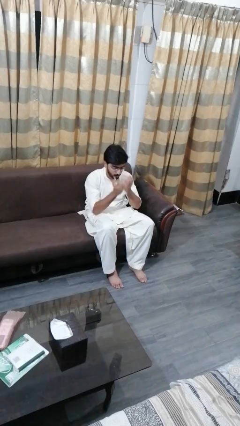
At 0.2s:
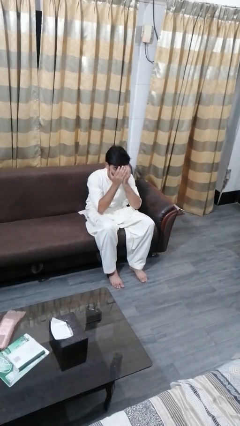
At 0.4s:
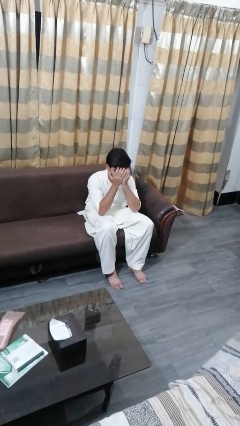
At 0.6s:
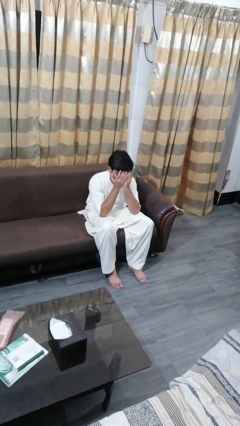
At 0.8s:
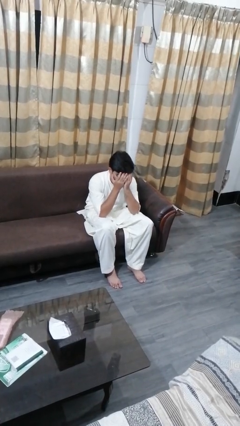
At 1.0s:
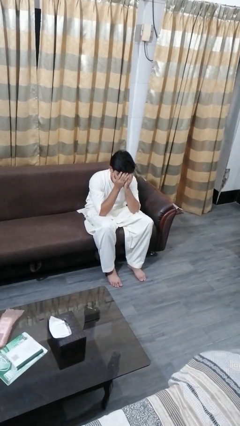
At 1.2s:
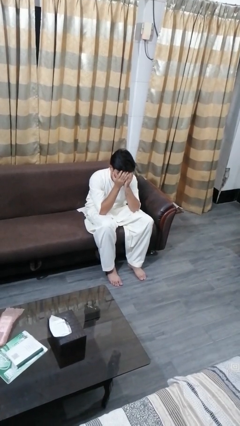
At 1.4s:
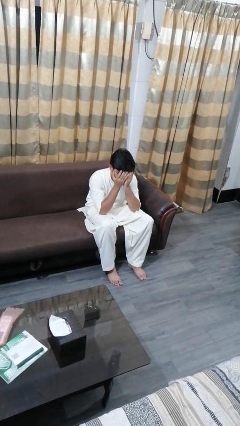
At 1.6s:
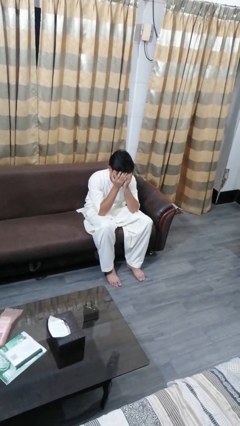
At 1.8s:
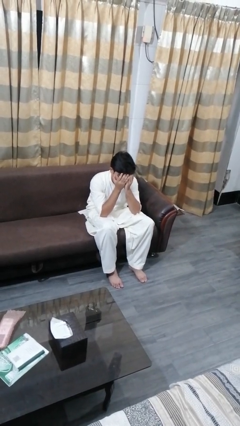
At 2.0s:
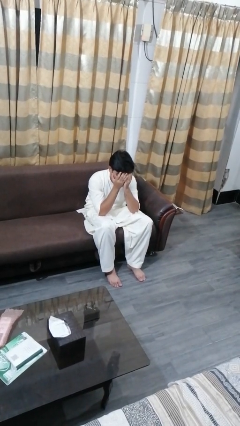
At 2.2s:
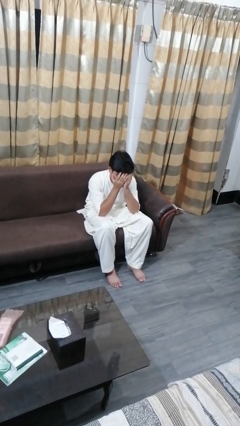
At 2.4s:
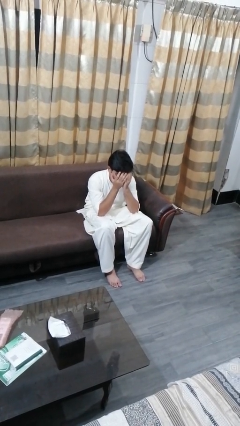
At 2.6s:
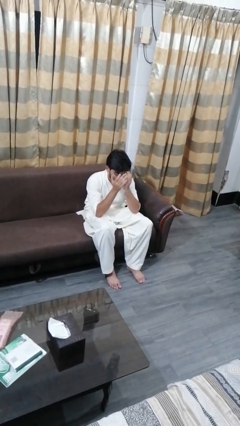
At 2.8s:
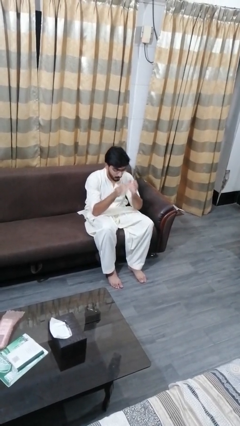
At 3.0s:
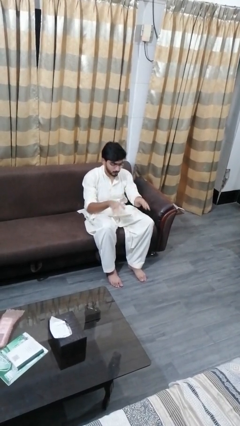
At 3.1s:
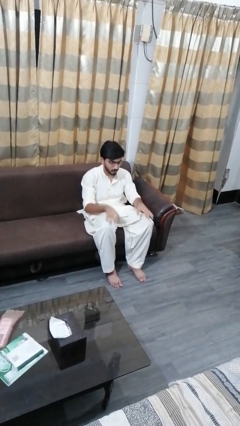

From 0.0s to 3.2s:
person covers face with hands

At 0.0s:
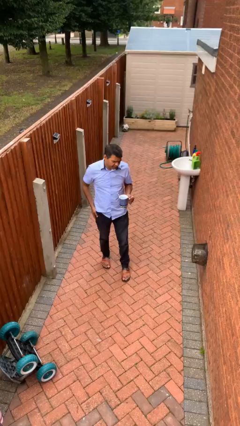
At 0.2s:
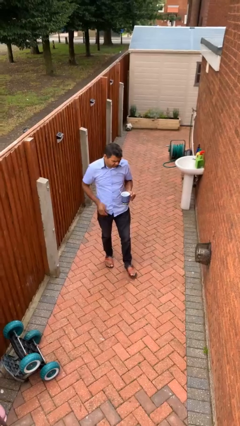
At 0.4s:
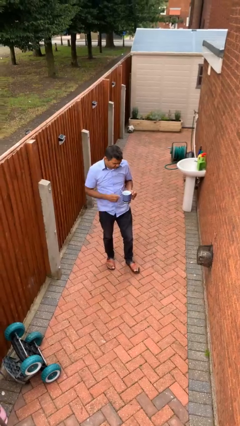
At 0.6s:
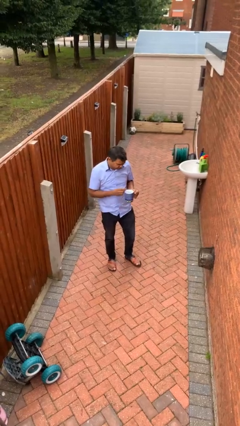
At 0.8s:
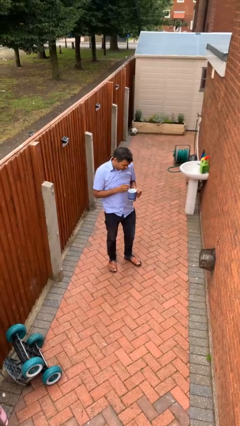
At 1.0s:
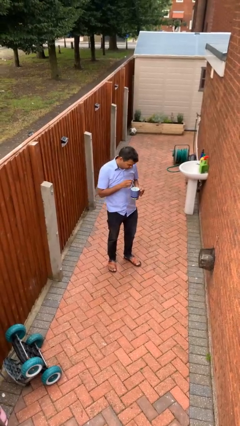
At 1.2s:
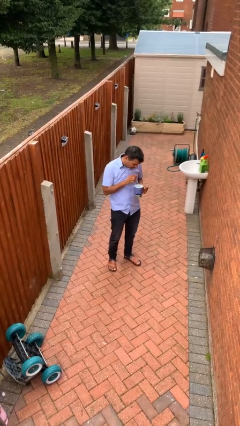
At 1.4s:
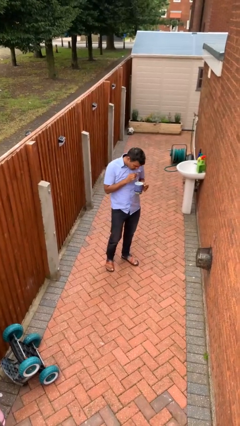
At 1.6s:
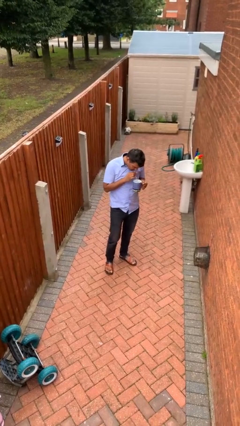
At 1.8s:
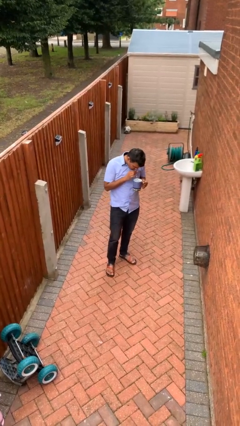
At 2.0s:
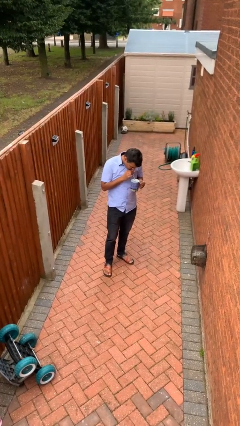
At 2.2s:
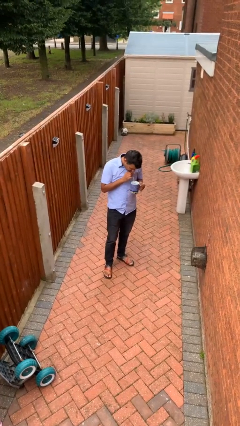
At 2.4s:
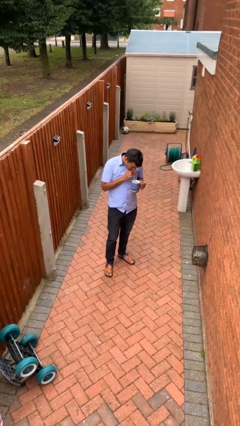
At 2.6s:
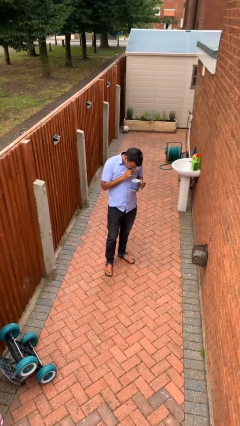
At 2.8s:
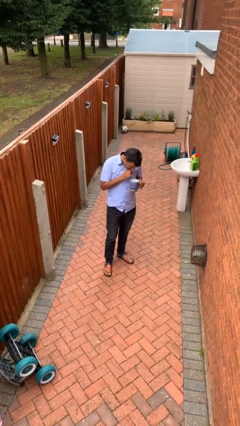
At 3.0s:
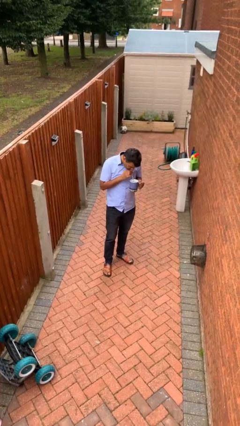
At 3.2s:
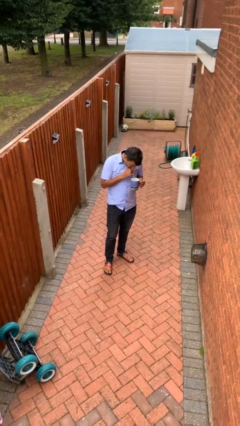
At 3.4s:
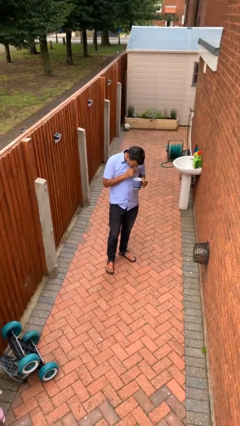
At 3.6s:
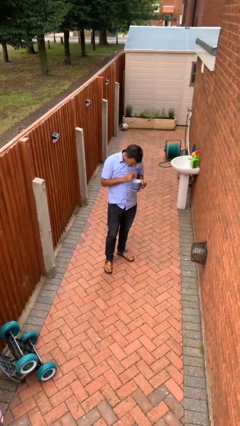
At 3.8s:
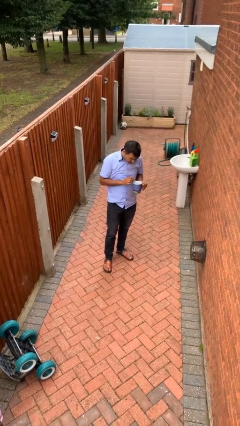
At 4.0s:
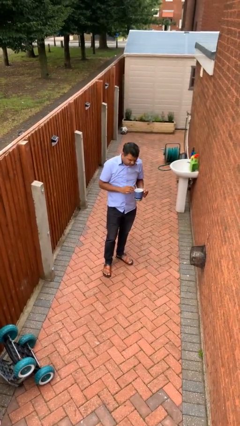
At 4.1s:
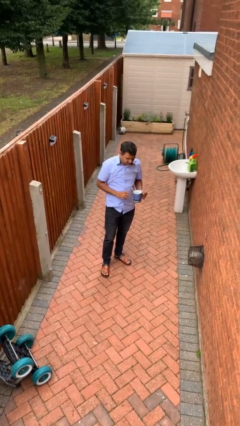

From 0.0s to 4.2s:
person drinks from straw

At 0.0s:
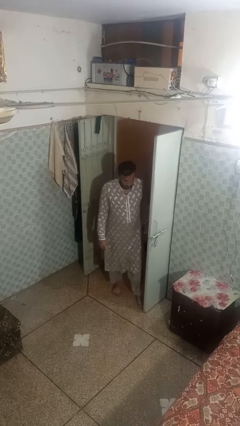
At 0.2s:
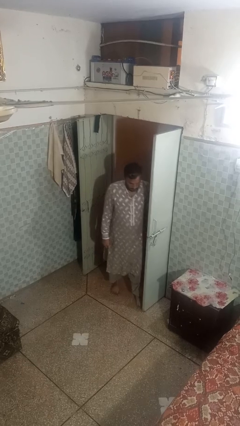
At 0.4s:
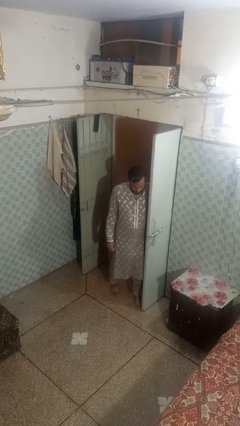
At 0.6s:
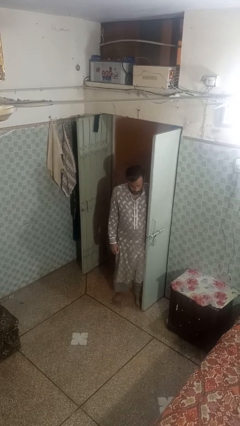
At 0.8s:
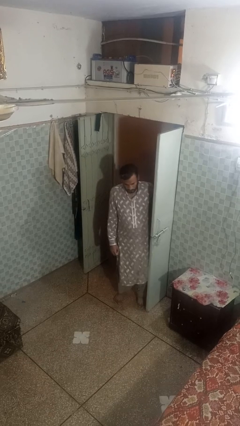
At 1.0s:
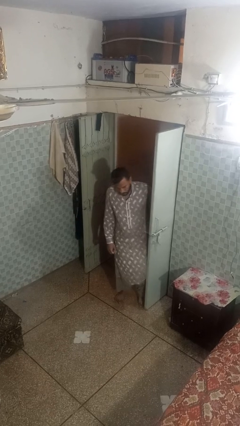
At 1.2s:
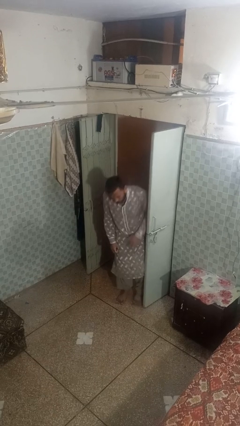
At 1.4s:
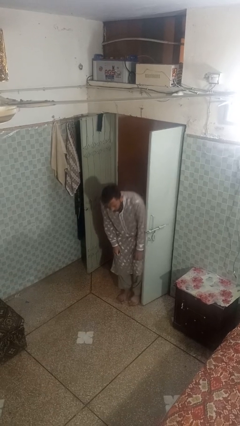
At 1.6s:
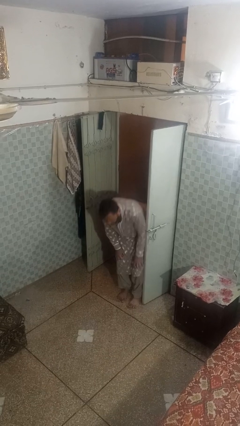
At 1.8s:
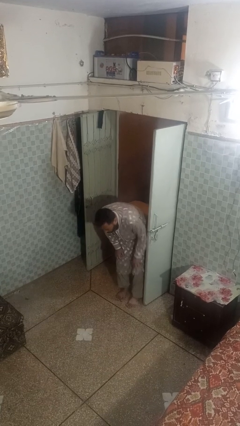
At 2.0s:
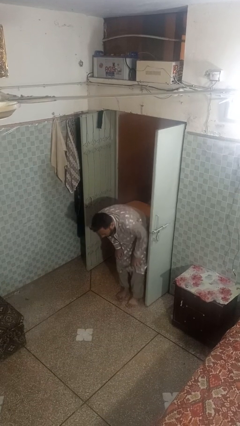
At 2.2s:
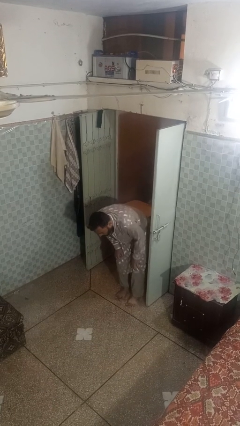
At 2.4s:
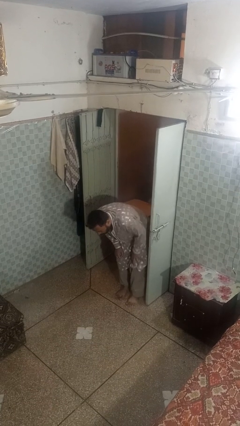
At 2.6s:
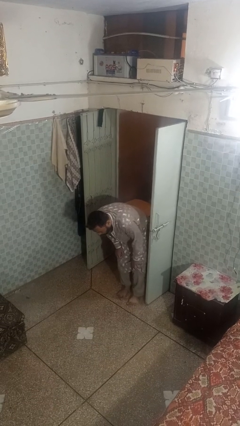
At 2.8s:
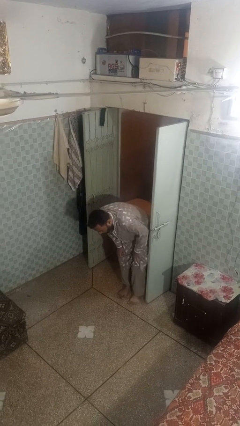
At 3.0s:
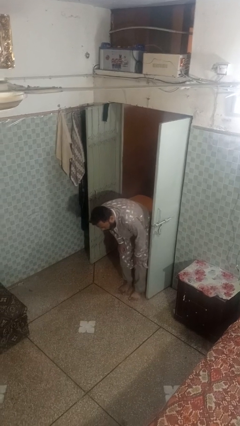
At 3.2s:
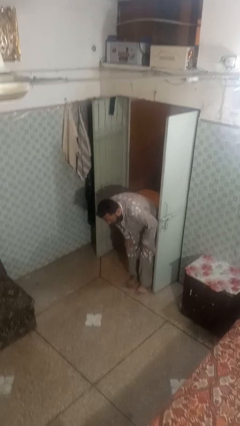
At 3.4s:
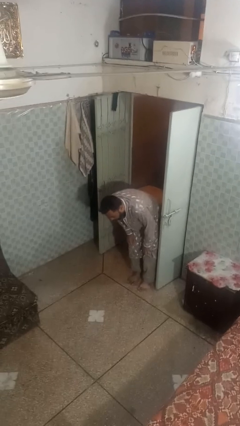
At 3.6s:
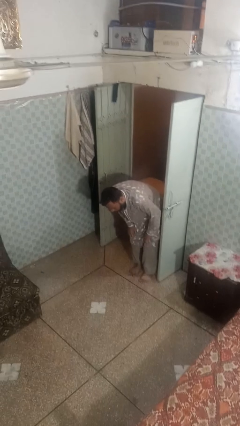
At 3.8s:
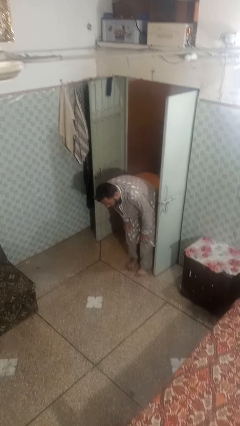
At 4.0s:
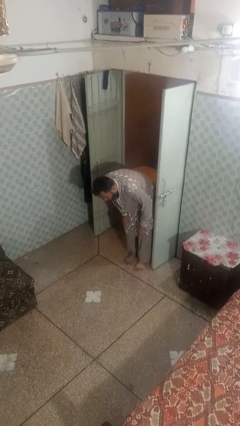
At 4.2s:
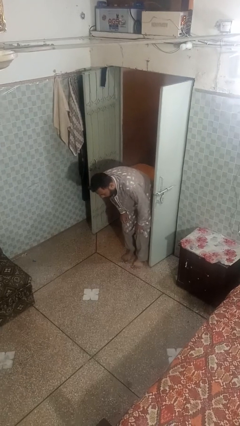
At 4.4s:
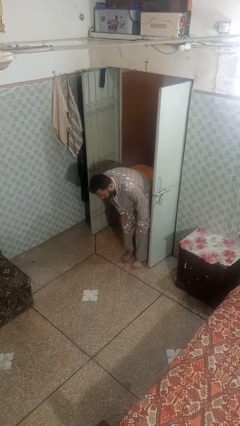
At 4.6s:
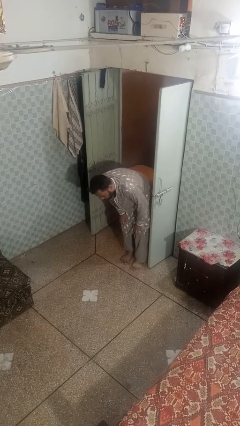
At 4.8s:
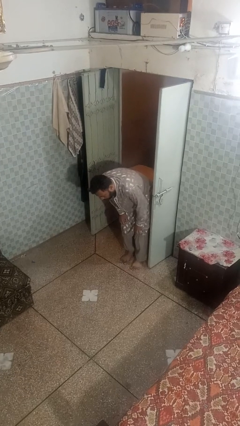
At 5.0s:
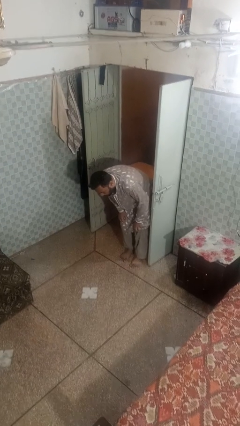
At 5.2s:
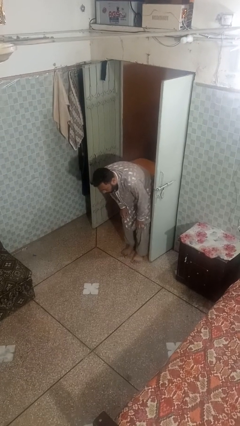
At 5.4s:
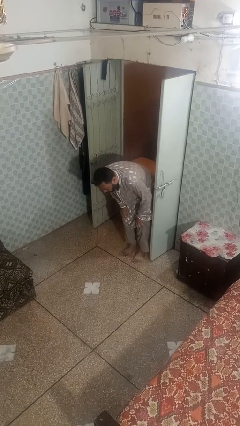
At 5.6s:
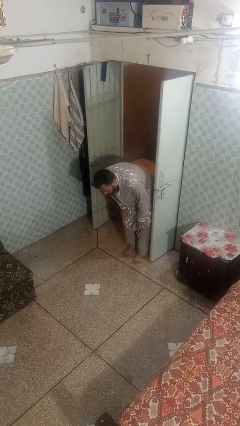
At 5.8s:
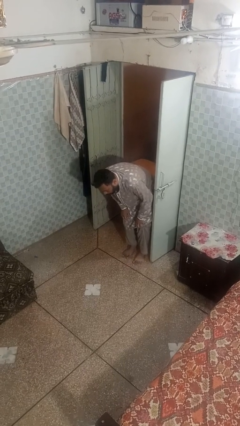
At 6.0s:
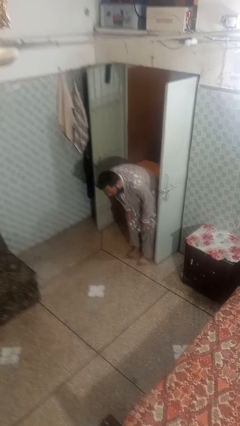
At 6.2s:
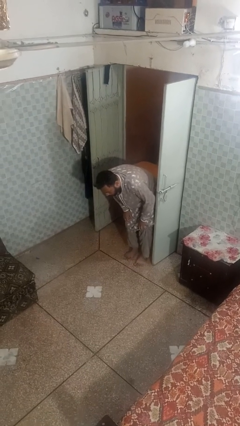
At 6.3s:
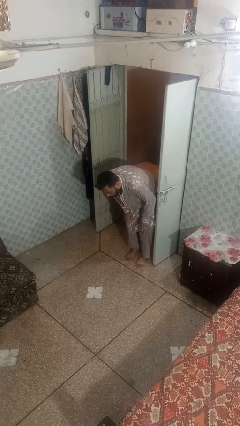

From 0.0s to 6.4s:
person trips on object on floor

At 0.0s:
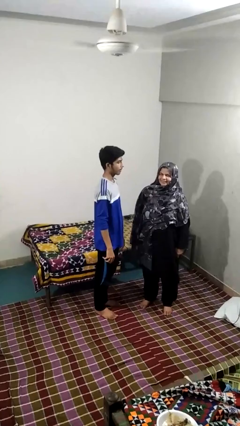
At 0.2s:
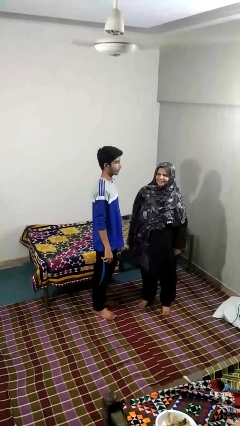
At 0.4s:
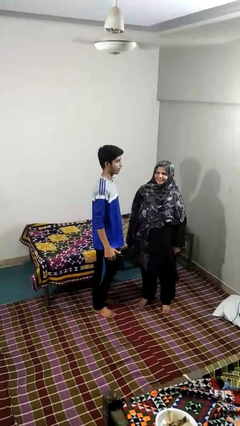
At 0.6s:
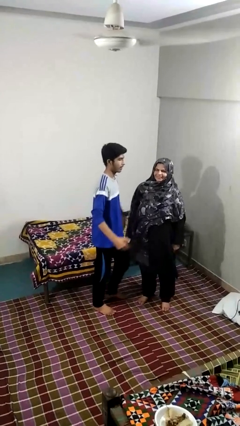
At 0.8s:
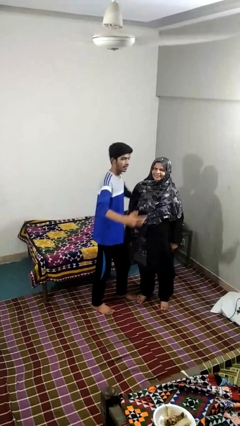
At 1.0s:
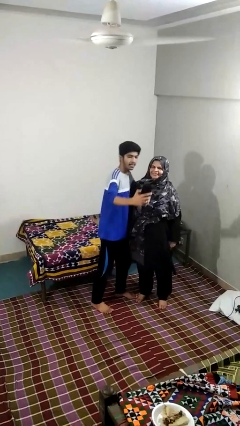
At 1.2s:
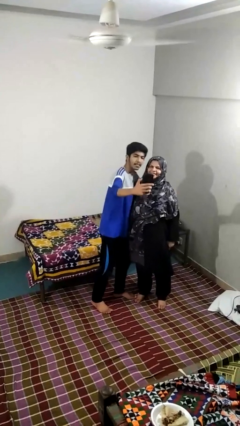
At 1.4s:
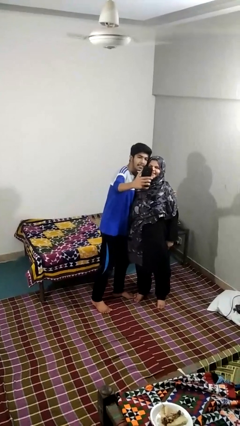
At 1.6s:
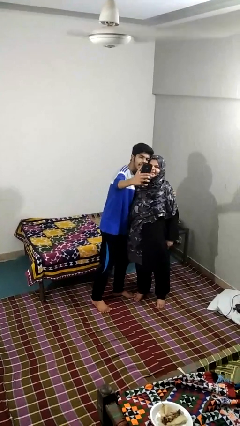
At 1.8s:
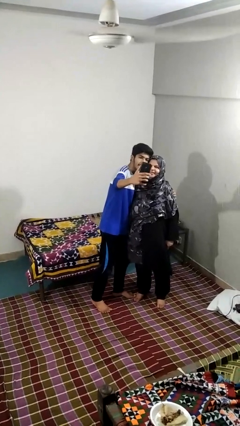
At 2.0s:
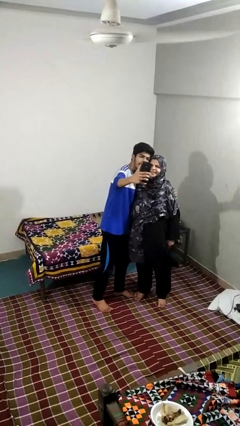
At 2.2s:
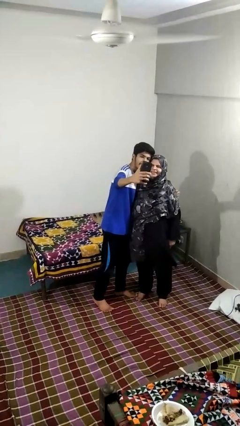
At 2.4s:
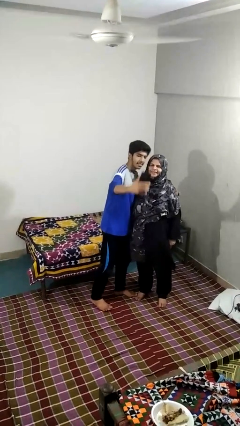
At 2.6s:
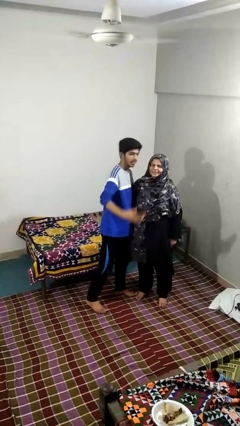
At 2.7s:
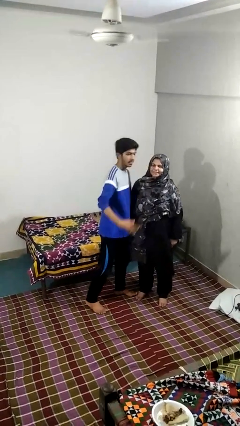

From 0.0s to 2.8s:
person takes selfie with person

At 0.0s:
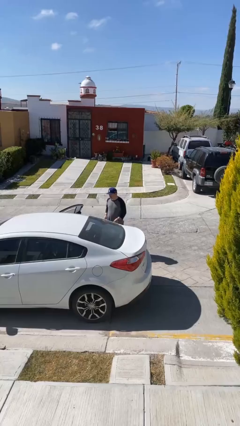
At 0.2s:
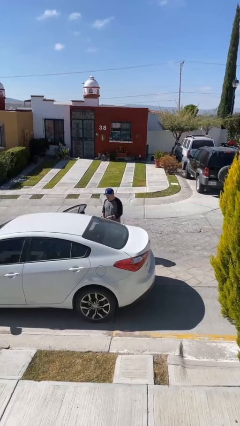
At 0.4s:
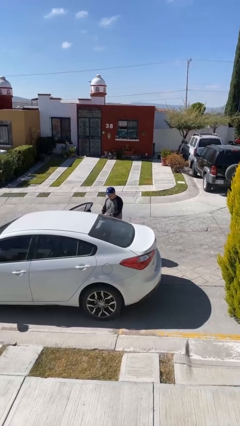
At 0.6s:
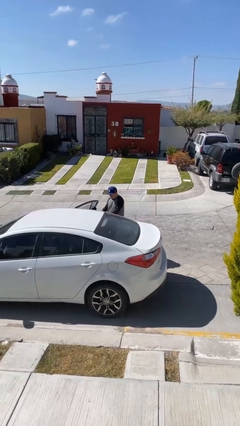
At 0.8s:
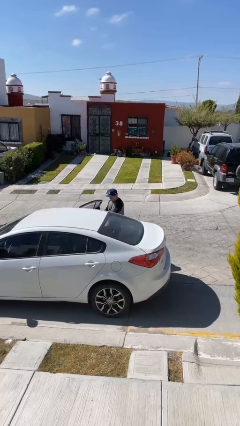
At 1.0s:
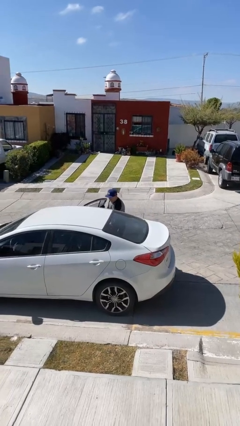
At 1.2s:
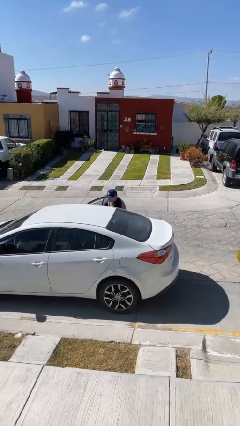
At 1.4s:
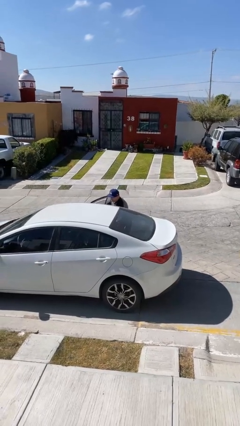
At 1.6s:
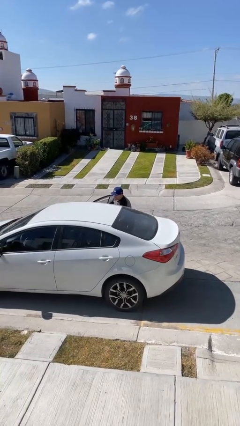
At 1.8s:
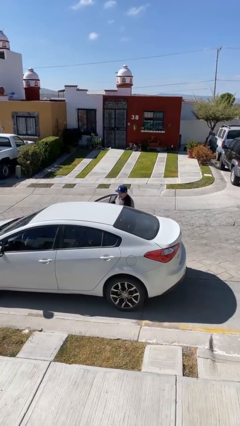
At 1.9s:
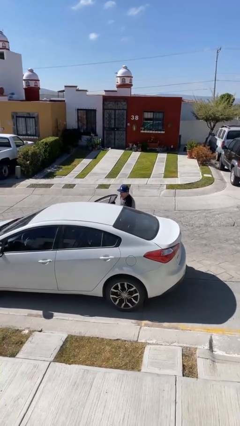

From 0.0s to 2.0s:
person unloads car
